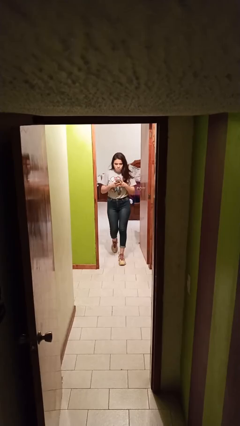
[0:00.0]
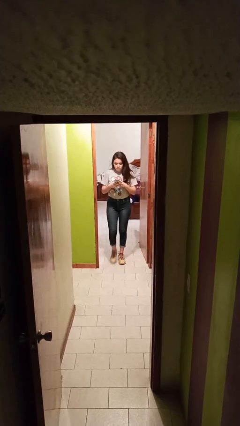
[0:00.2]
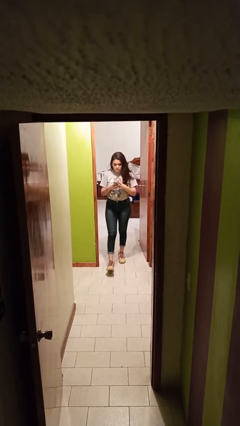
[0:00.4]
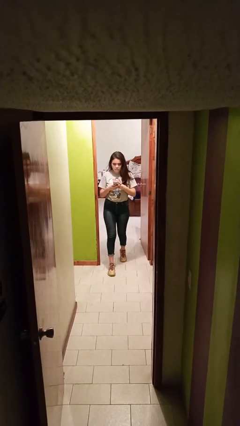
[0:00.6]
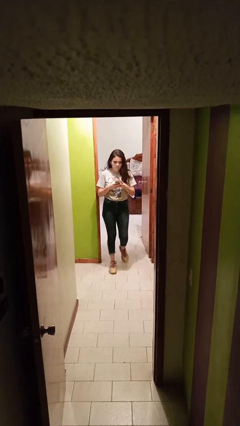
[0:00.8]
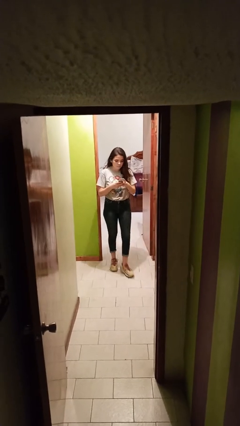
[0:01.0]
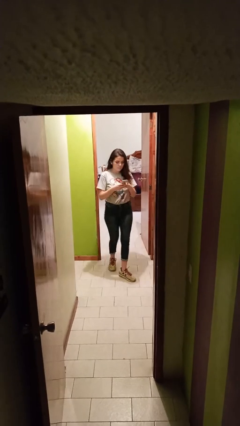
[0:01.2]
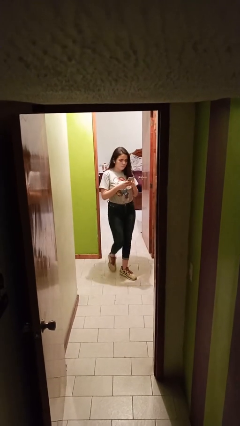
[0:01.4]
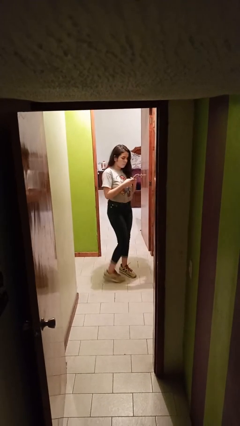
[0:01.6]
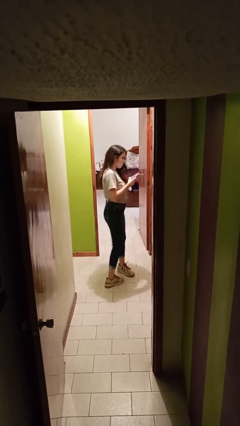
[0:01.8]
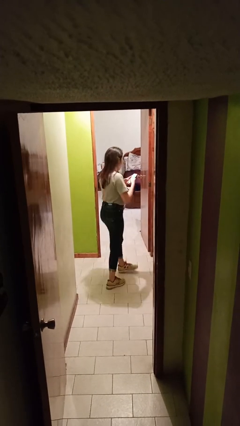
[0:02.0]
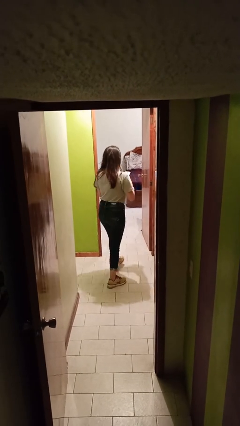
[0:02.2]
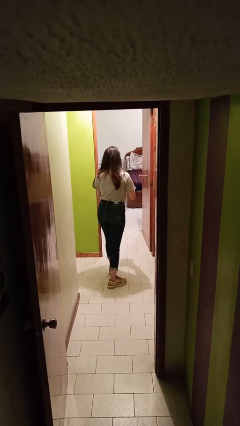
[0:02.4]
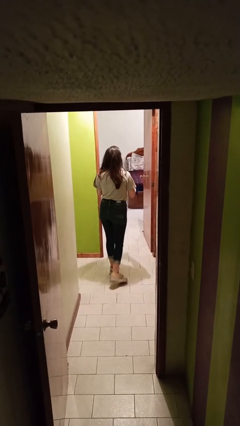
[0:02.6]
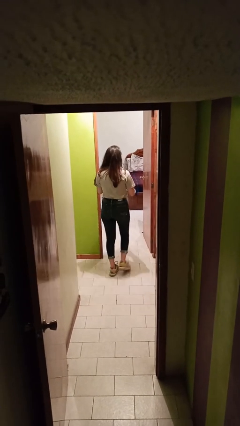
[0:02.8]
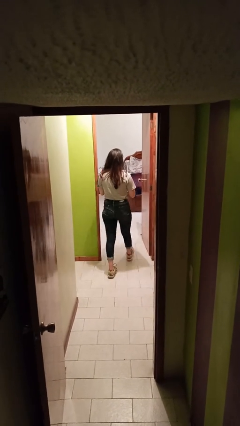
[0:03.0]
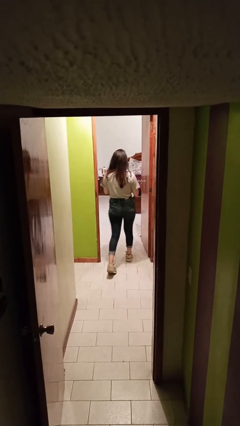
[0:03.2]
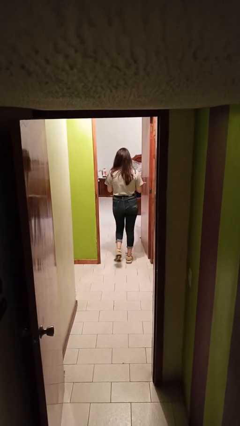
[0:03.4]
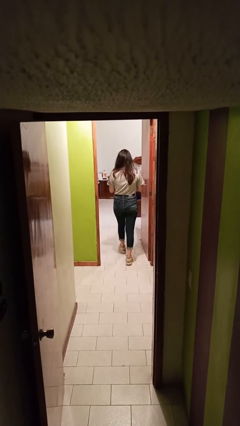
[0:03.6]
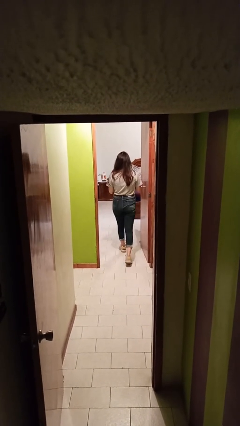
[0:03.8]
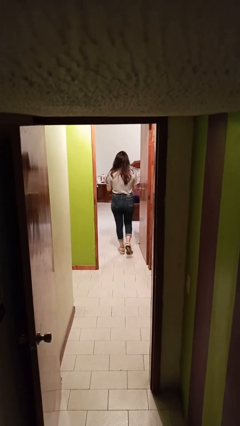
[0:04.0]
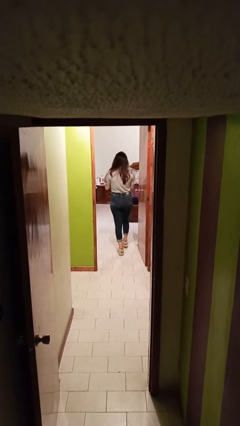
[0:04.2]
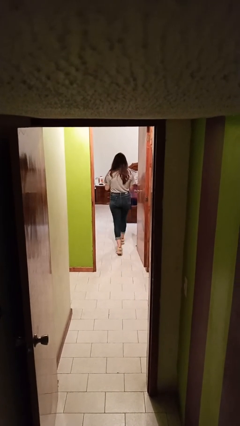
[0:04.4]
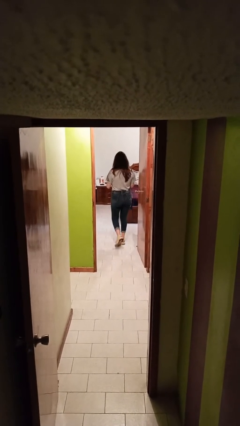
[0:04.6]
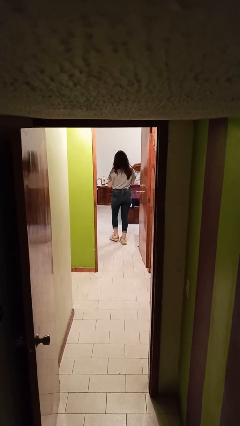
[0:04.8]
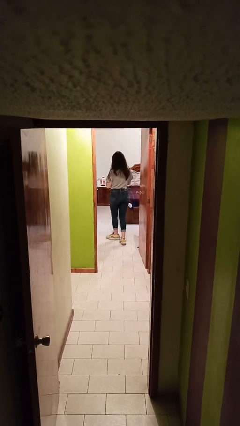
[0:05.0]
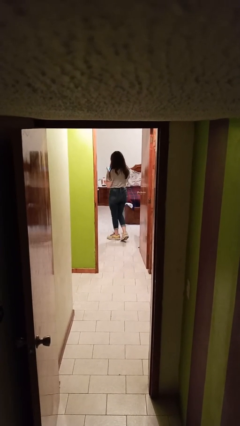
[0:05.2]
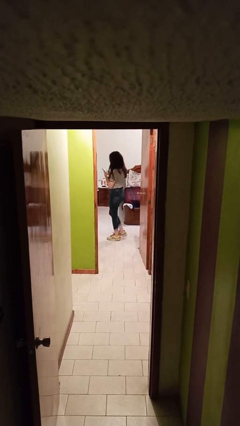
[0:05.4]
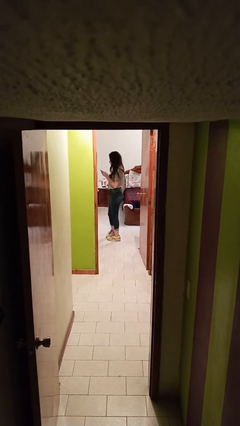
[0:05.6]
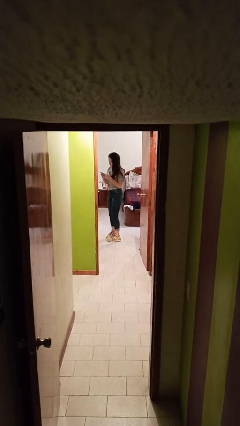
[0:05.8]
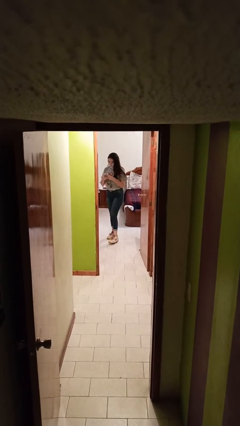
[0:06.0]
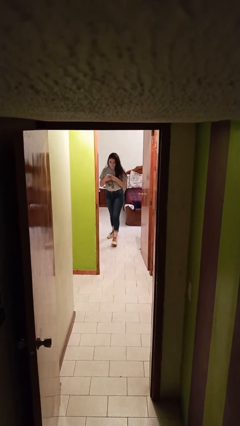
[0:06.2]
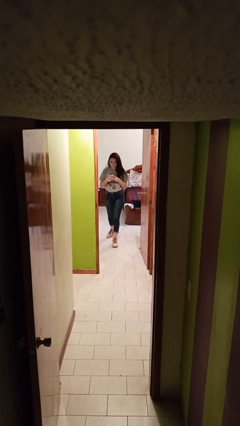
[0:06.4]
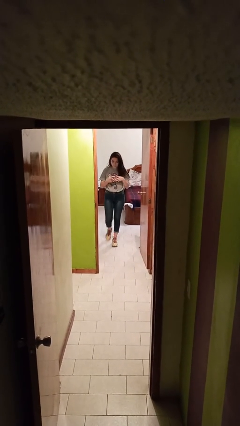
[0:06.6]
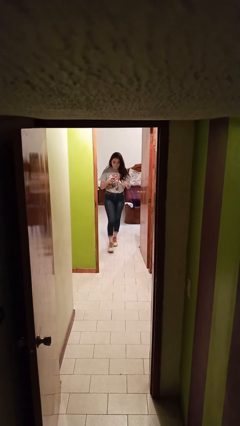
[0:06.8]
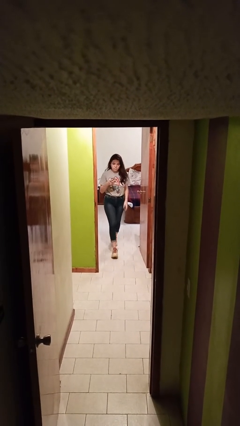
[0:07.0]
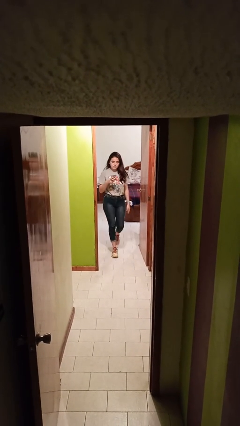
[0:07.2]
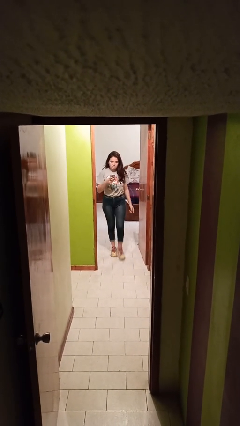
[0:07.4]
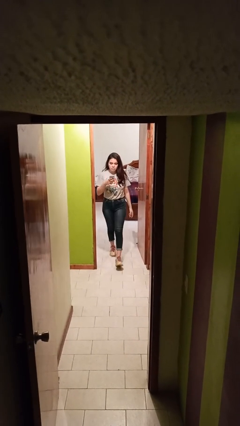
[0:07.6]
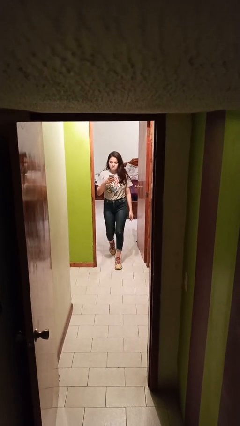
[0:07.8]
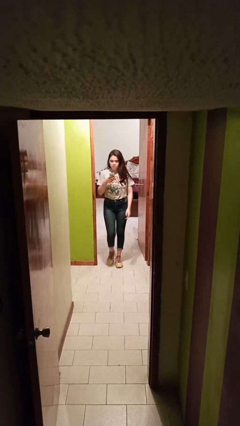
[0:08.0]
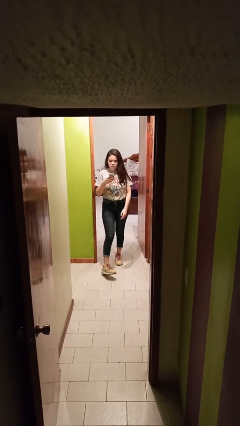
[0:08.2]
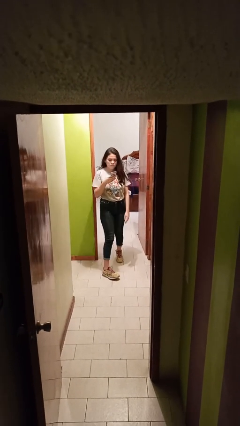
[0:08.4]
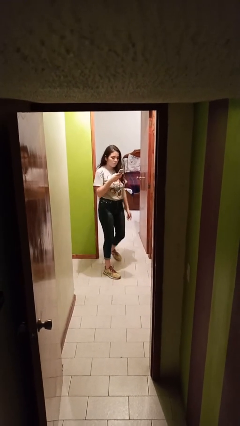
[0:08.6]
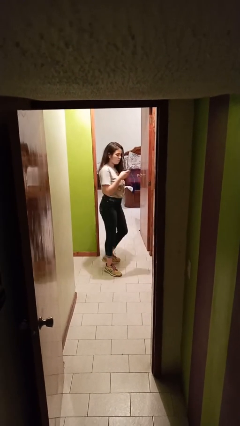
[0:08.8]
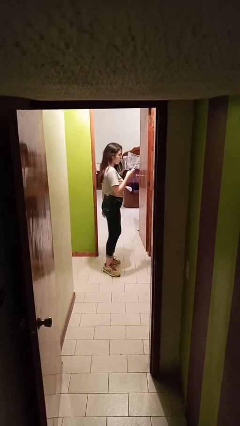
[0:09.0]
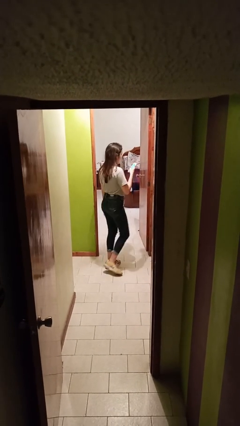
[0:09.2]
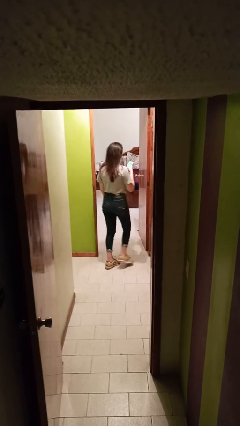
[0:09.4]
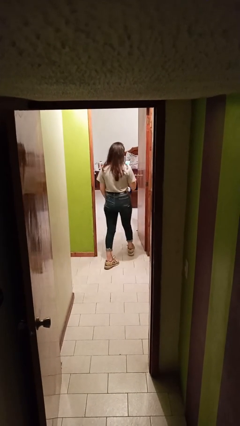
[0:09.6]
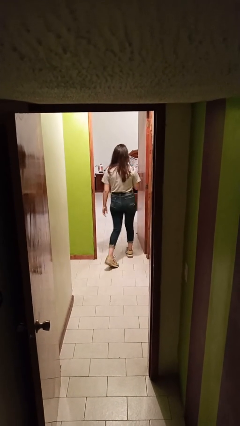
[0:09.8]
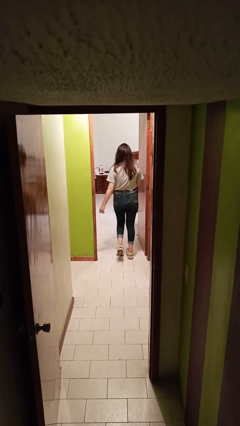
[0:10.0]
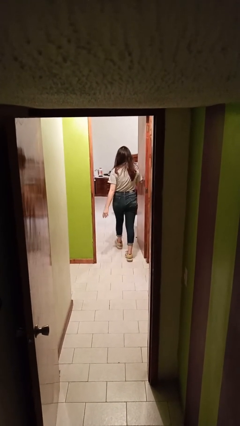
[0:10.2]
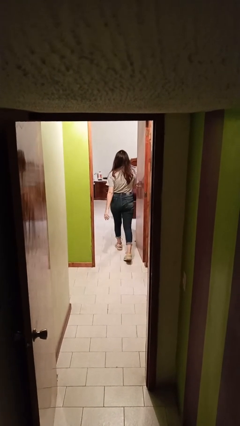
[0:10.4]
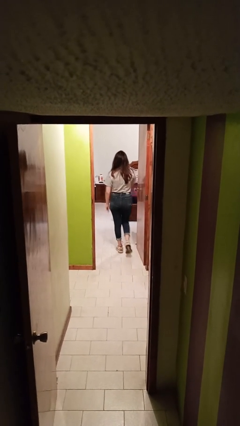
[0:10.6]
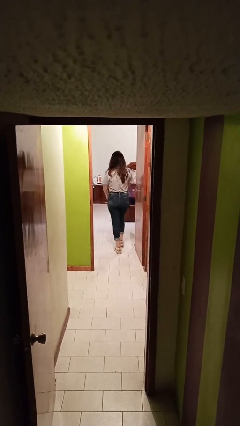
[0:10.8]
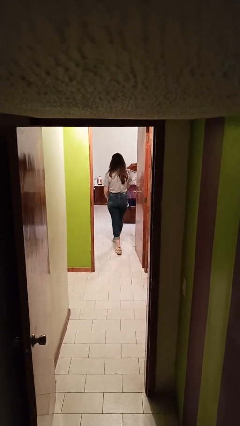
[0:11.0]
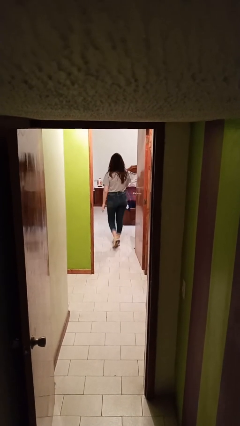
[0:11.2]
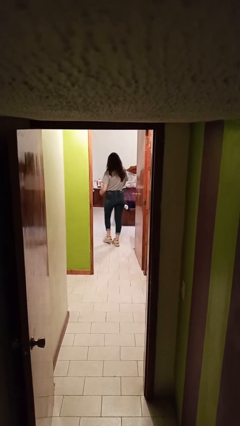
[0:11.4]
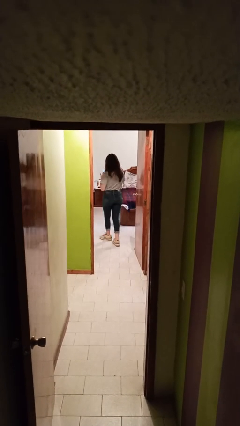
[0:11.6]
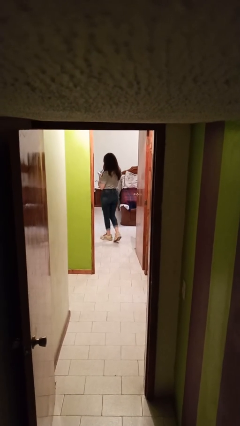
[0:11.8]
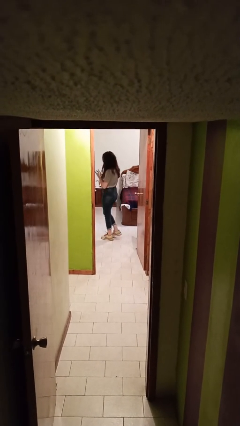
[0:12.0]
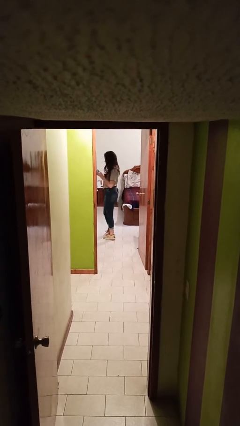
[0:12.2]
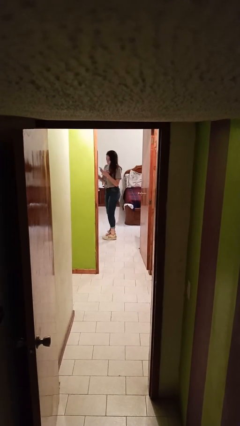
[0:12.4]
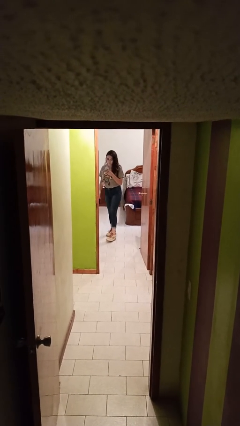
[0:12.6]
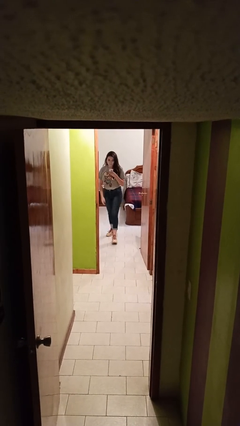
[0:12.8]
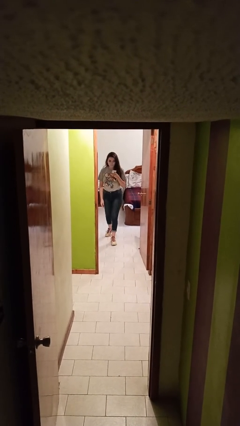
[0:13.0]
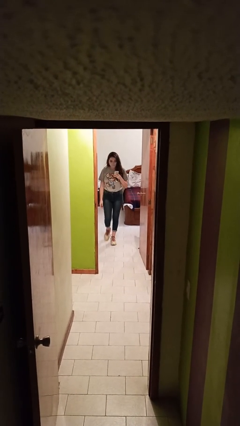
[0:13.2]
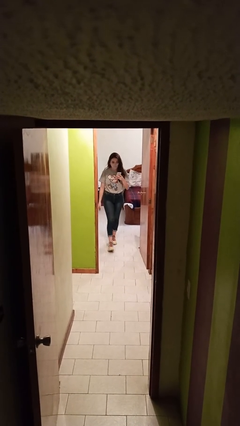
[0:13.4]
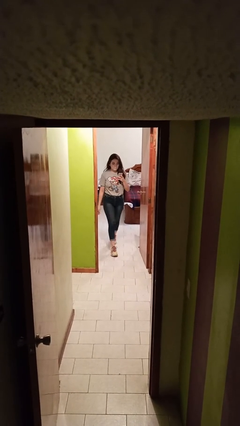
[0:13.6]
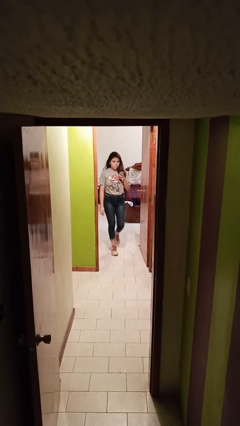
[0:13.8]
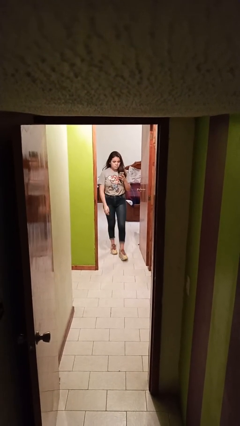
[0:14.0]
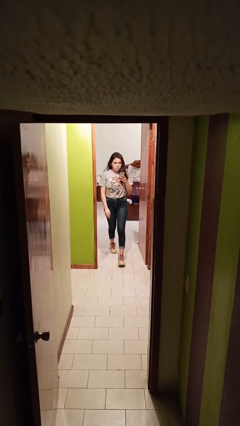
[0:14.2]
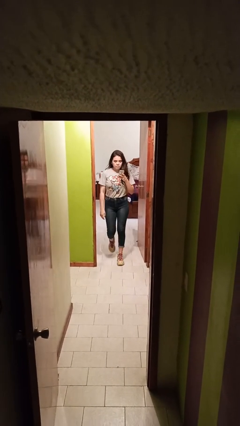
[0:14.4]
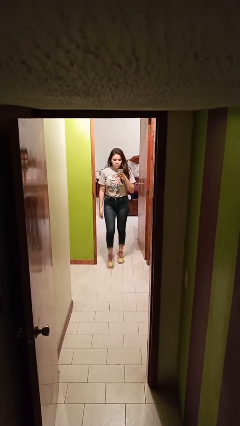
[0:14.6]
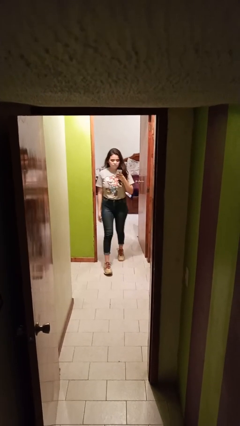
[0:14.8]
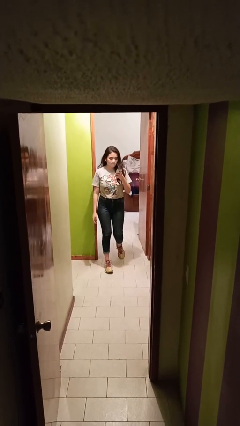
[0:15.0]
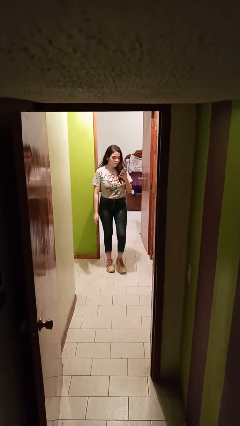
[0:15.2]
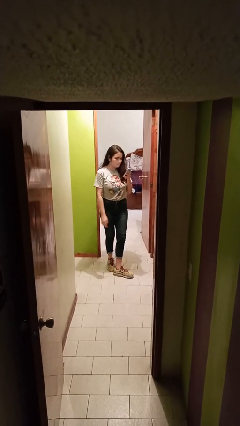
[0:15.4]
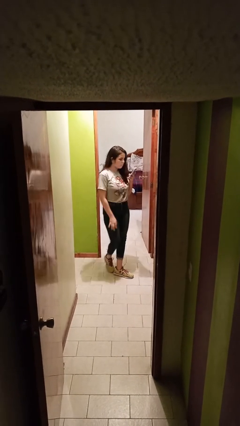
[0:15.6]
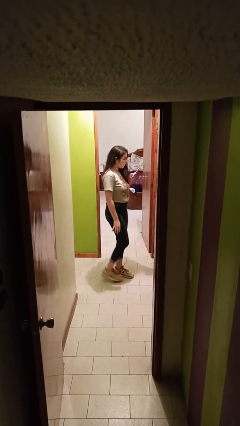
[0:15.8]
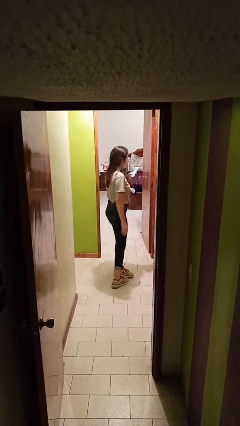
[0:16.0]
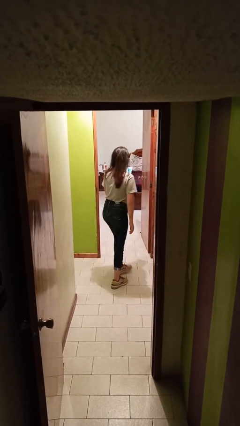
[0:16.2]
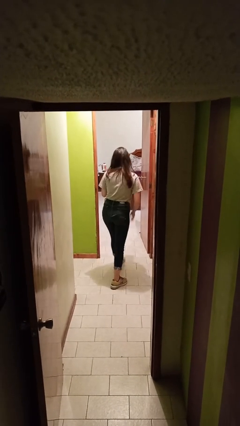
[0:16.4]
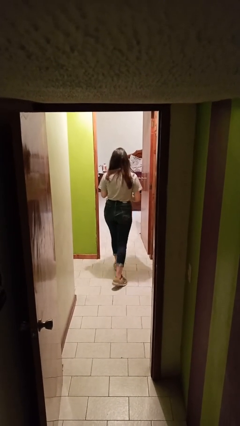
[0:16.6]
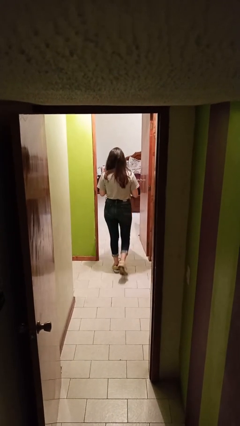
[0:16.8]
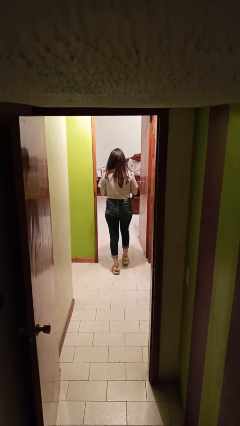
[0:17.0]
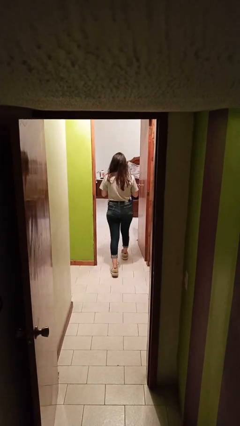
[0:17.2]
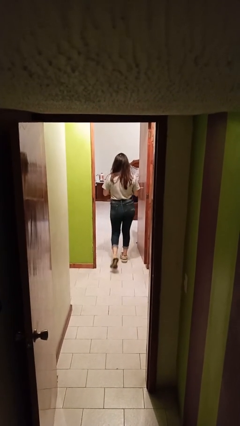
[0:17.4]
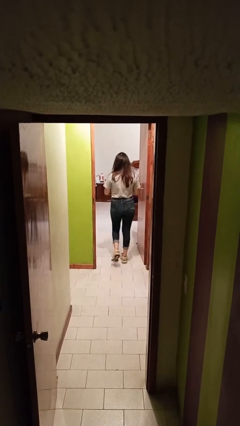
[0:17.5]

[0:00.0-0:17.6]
person texts on phone

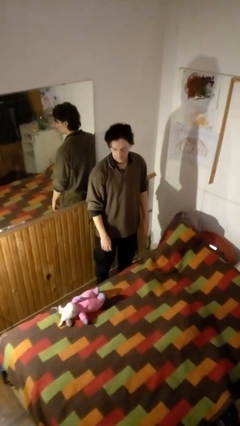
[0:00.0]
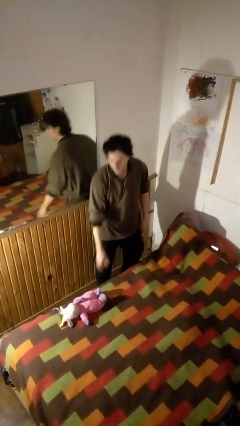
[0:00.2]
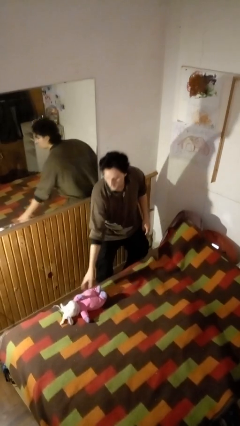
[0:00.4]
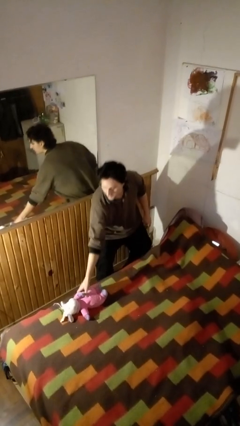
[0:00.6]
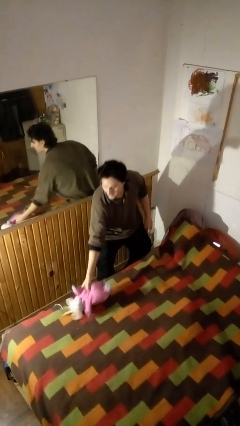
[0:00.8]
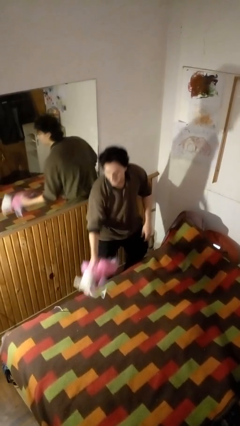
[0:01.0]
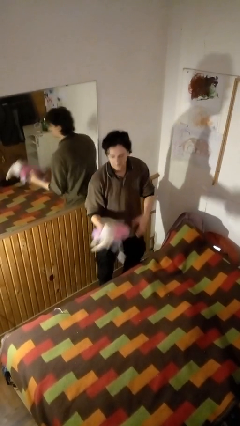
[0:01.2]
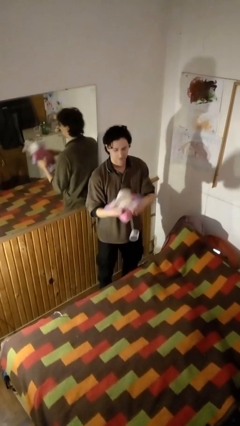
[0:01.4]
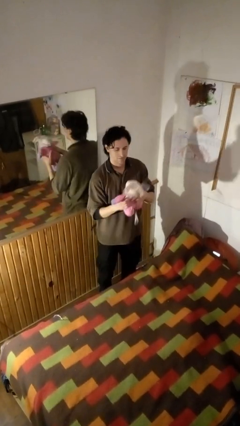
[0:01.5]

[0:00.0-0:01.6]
person picks up object from bed
